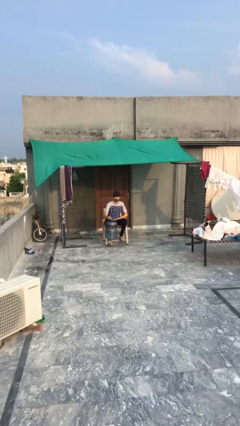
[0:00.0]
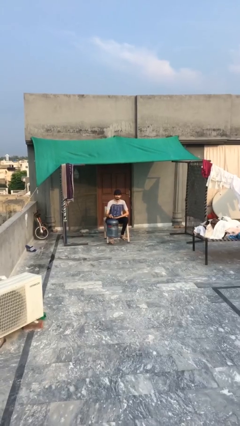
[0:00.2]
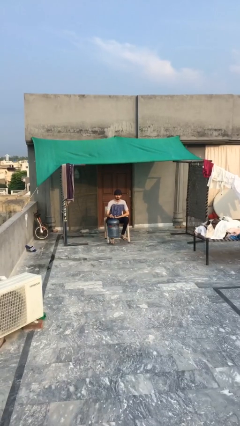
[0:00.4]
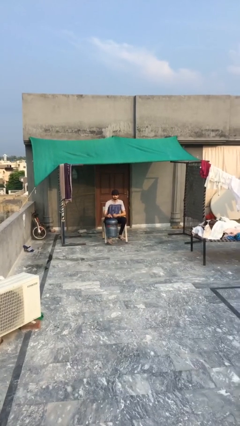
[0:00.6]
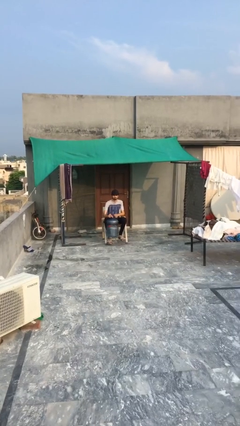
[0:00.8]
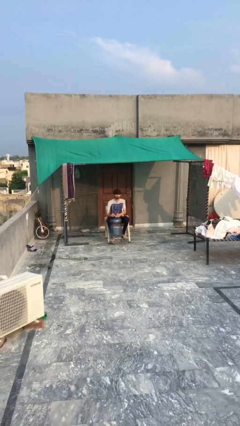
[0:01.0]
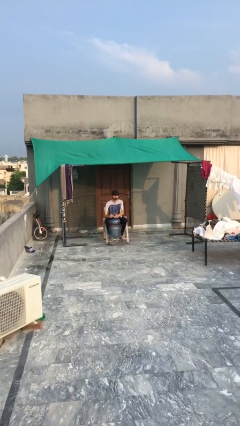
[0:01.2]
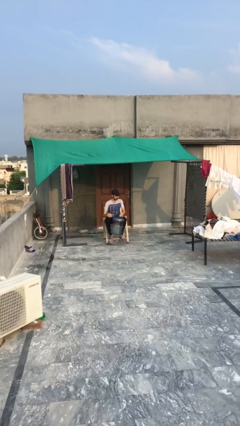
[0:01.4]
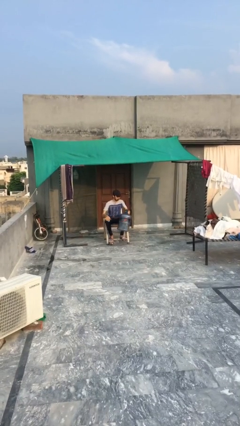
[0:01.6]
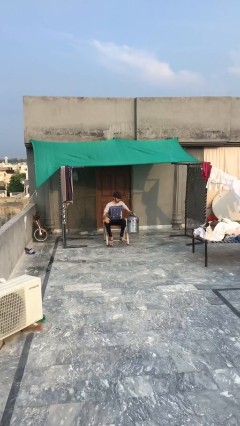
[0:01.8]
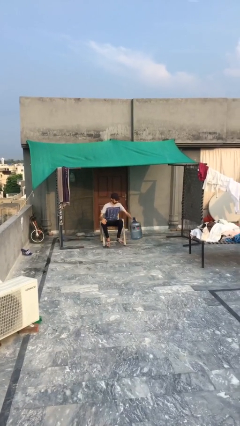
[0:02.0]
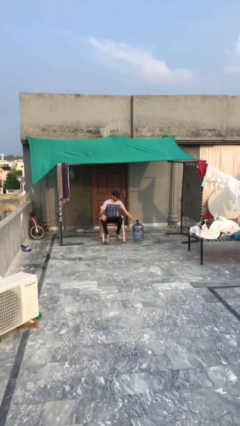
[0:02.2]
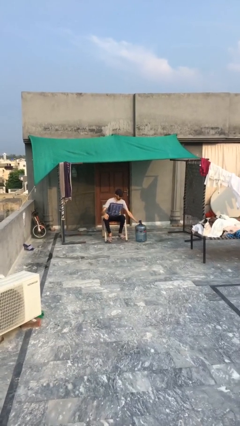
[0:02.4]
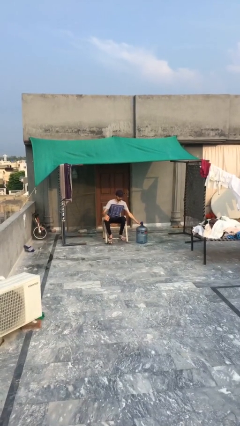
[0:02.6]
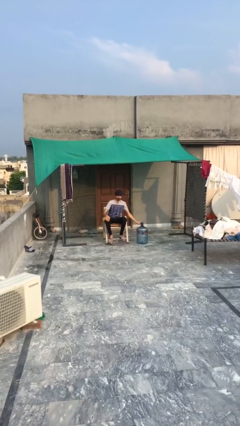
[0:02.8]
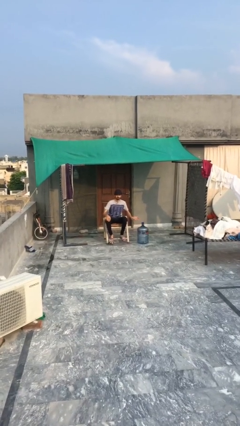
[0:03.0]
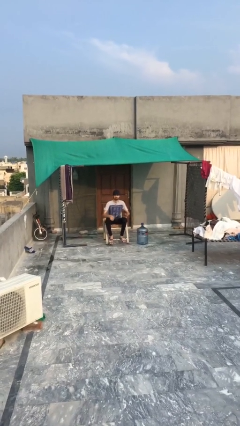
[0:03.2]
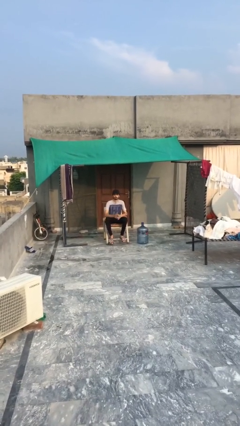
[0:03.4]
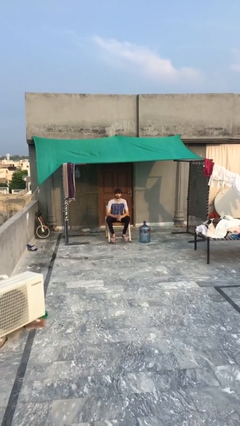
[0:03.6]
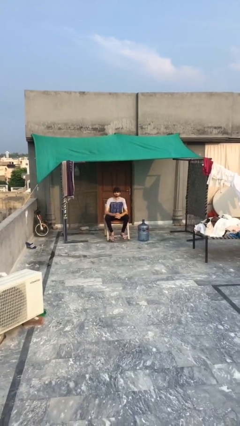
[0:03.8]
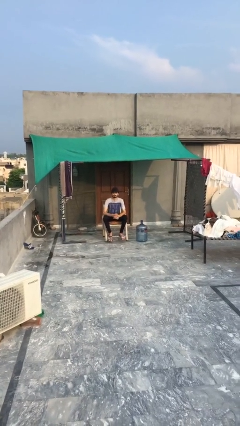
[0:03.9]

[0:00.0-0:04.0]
person puts down object on floor

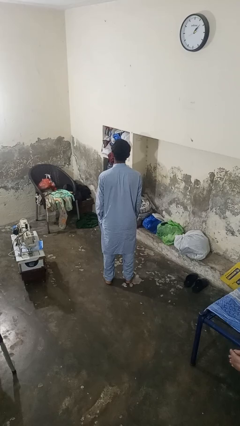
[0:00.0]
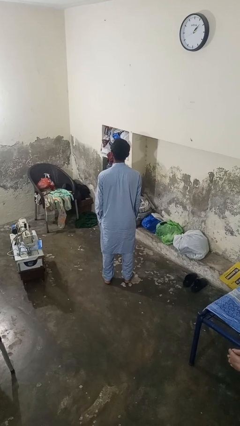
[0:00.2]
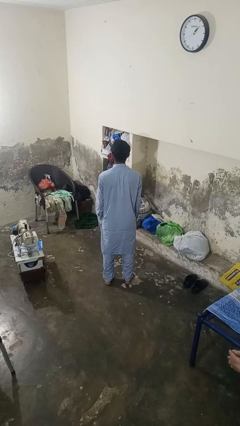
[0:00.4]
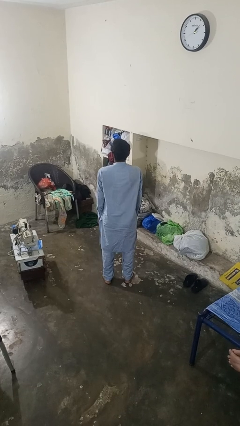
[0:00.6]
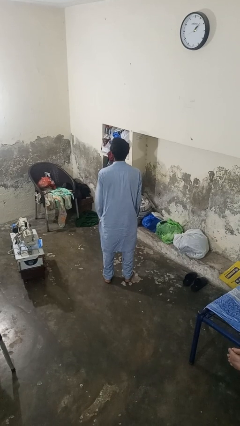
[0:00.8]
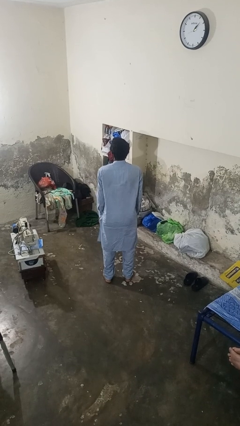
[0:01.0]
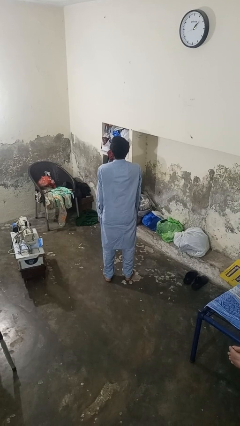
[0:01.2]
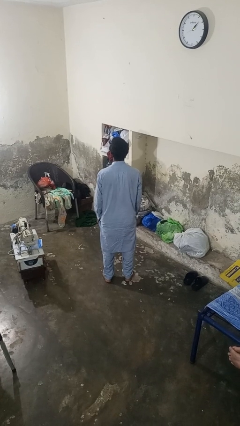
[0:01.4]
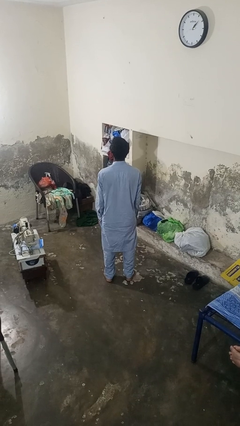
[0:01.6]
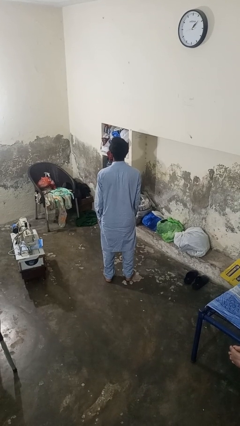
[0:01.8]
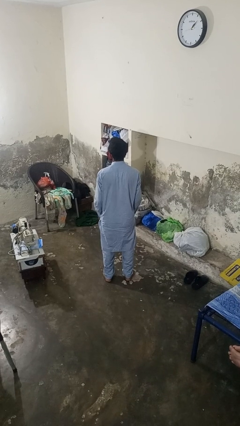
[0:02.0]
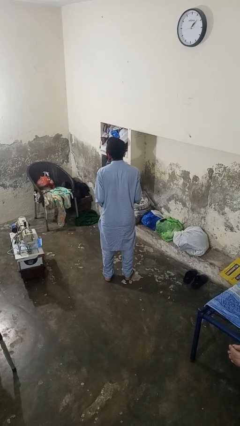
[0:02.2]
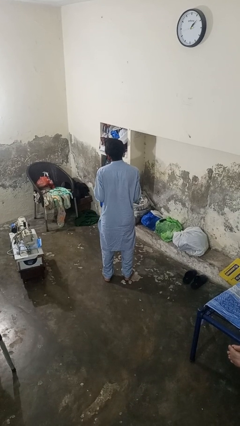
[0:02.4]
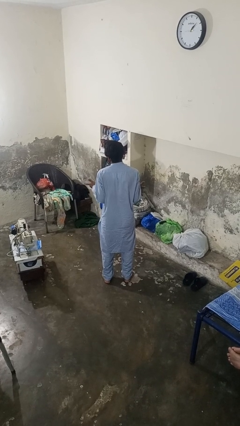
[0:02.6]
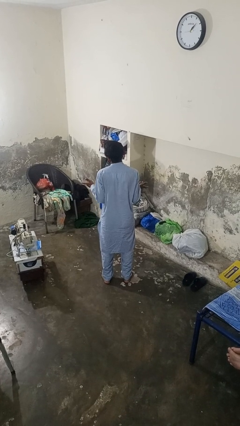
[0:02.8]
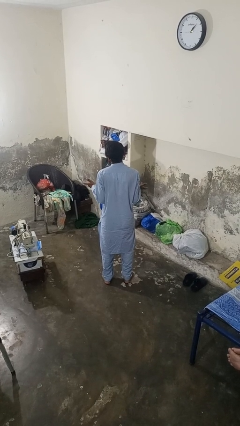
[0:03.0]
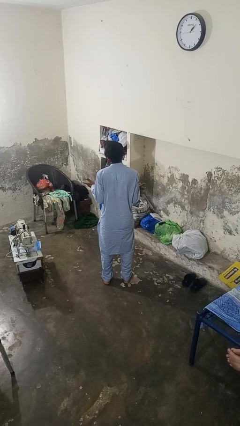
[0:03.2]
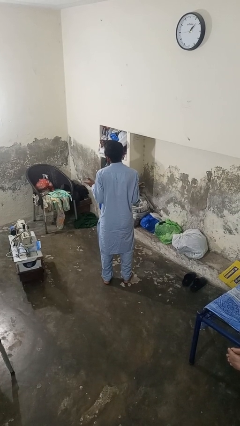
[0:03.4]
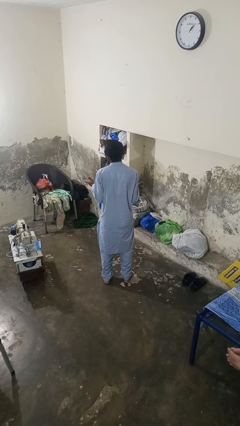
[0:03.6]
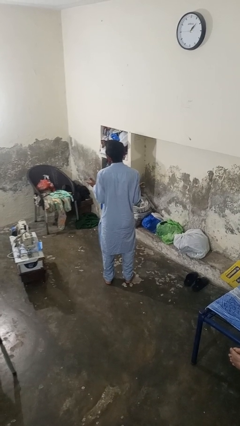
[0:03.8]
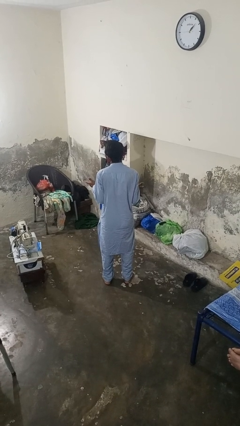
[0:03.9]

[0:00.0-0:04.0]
person shrugs

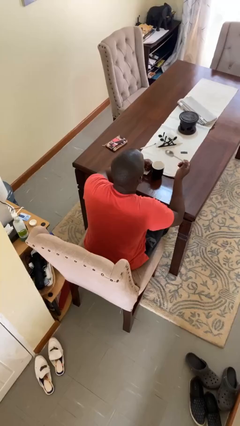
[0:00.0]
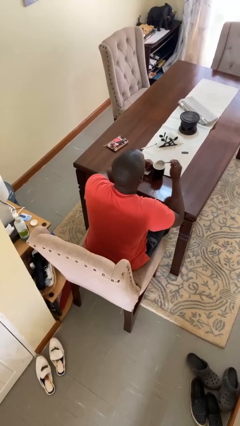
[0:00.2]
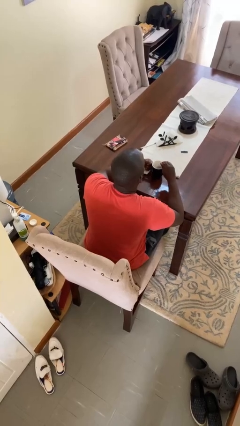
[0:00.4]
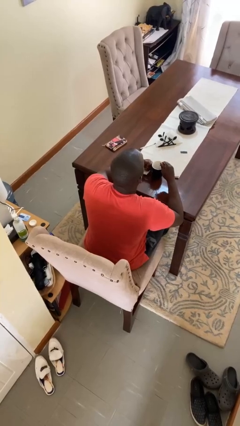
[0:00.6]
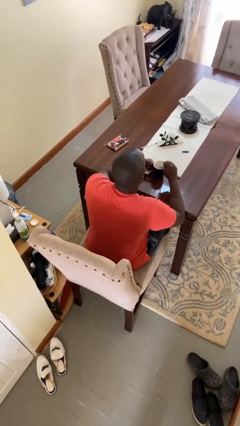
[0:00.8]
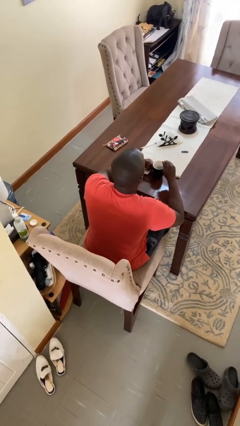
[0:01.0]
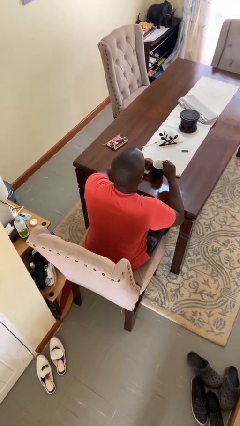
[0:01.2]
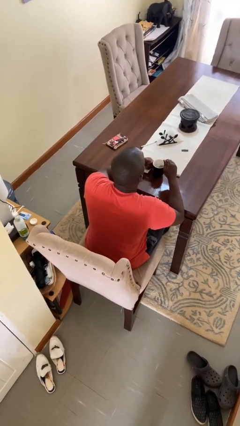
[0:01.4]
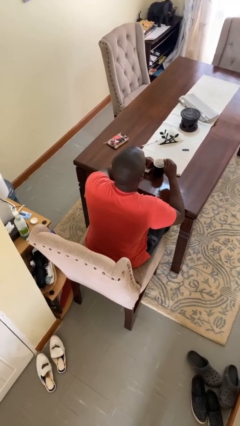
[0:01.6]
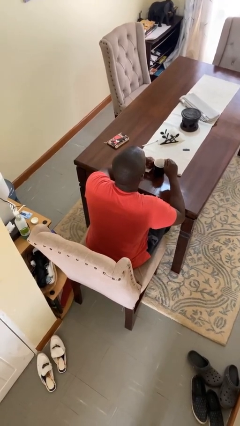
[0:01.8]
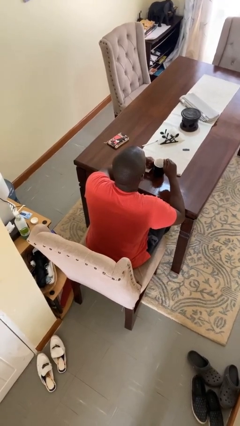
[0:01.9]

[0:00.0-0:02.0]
person stirs mug

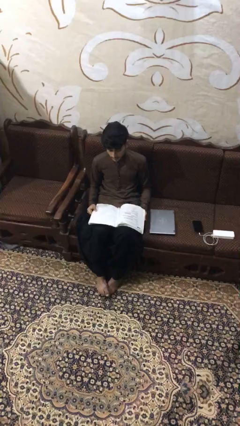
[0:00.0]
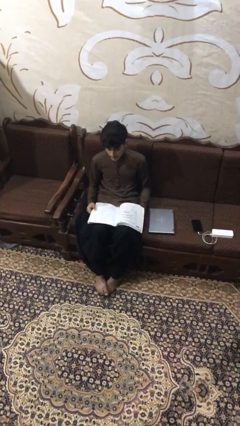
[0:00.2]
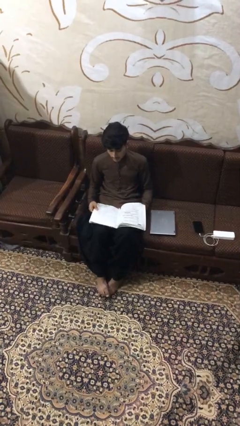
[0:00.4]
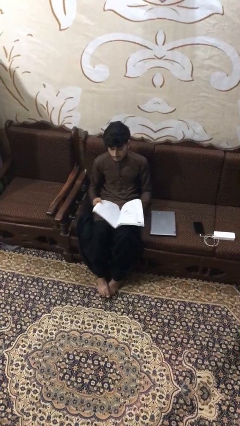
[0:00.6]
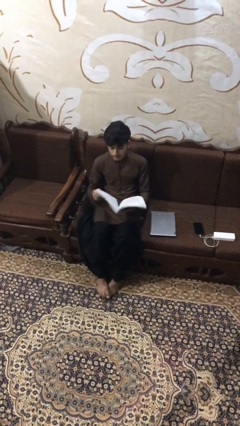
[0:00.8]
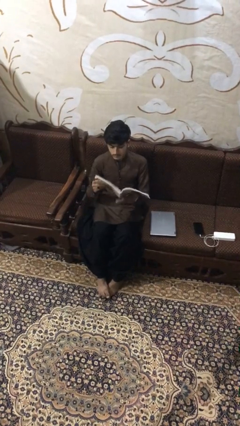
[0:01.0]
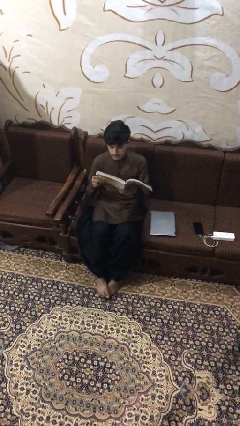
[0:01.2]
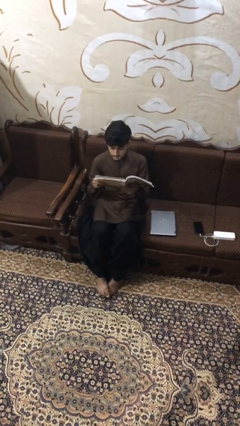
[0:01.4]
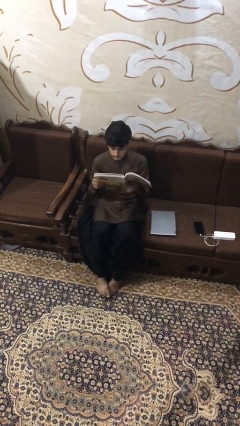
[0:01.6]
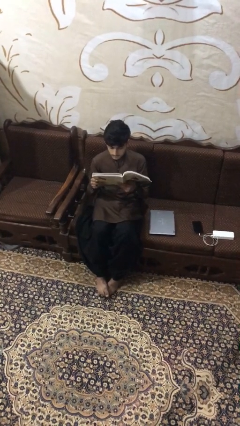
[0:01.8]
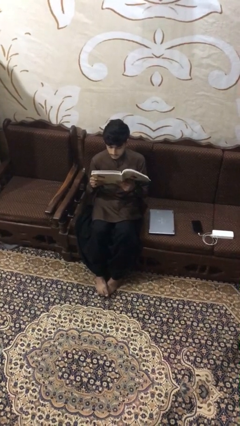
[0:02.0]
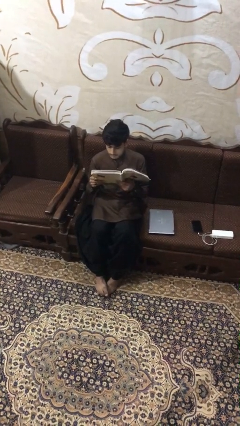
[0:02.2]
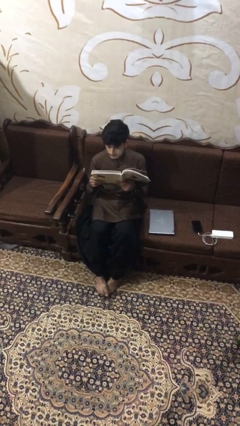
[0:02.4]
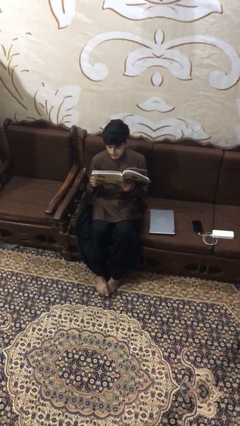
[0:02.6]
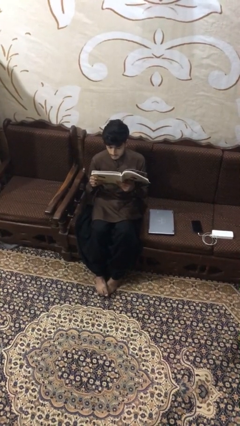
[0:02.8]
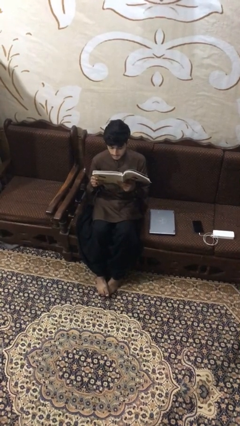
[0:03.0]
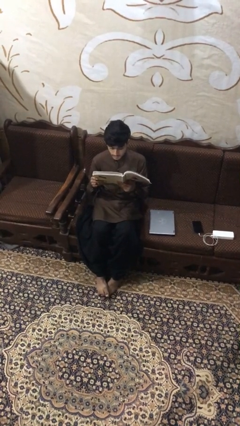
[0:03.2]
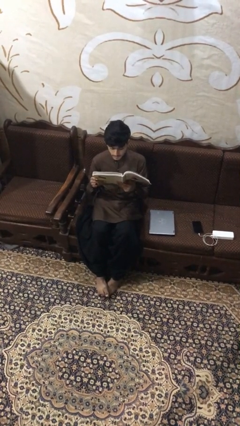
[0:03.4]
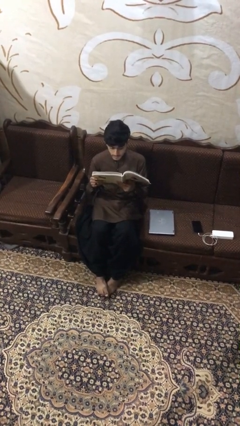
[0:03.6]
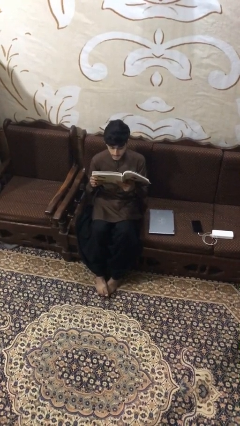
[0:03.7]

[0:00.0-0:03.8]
person reads document

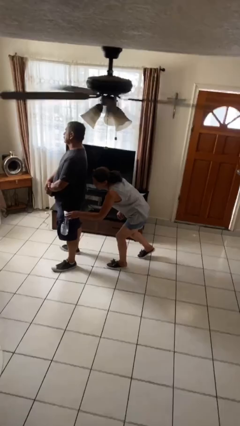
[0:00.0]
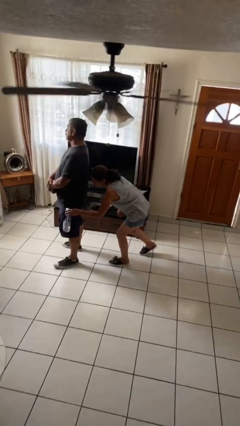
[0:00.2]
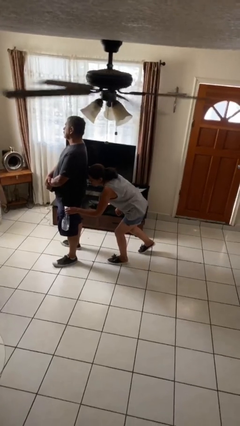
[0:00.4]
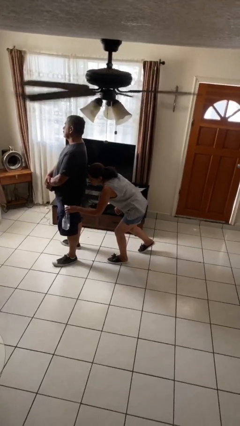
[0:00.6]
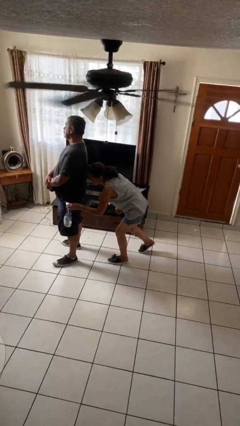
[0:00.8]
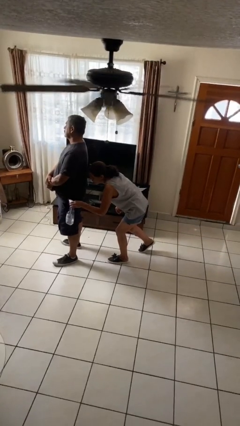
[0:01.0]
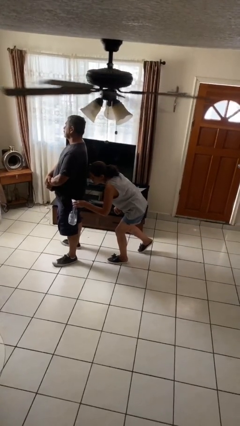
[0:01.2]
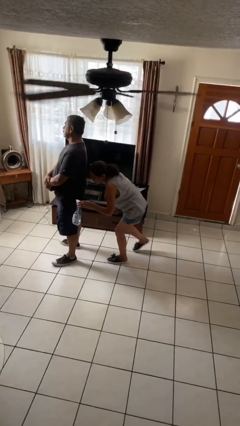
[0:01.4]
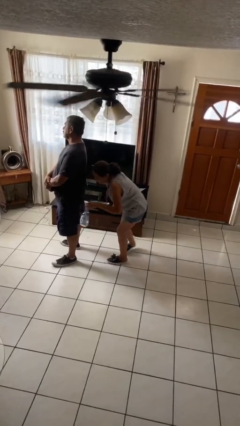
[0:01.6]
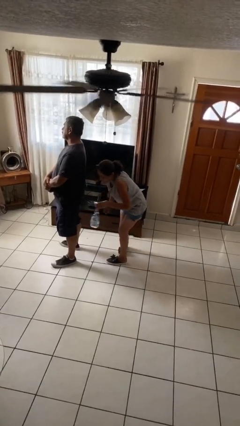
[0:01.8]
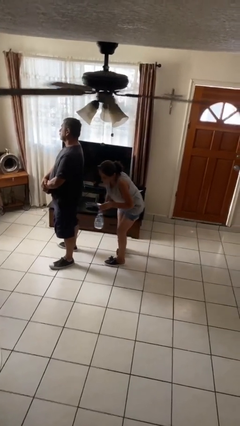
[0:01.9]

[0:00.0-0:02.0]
person steals object from person

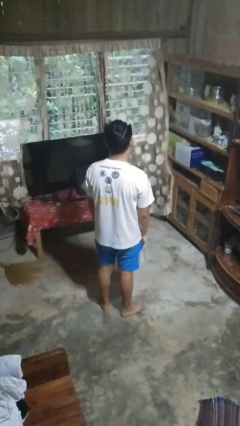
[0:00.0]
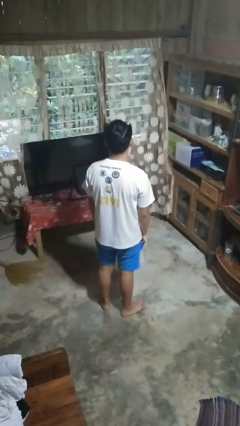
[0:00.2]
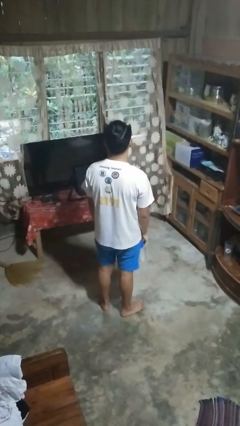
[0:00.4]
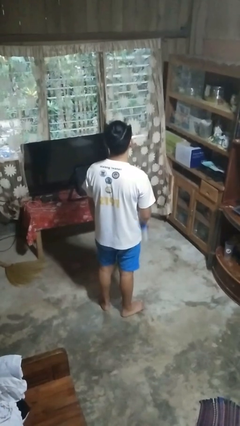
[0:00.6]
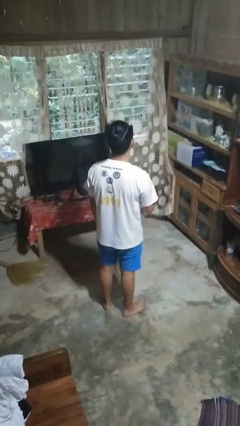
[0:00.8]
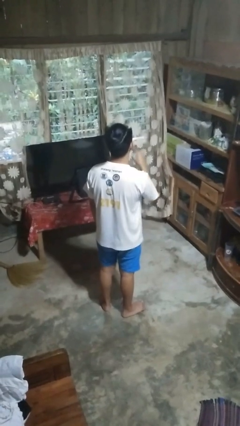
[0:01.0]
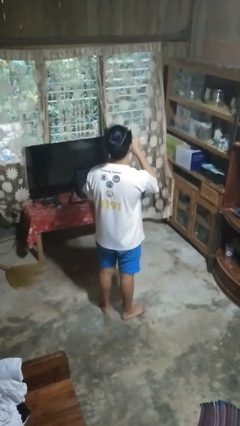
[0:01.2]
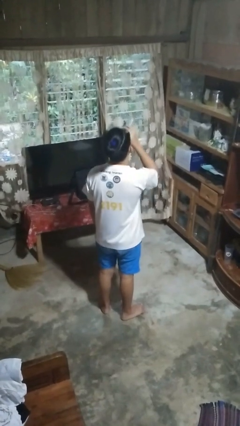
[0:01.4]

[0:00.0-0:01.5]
person drinks from bottle
